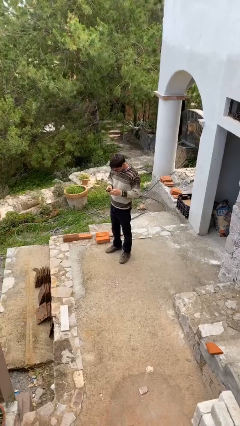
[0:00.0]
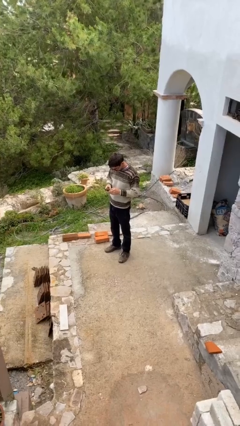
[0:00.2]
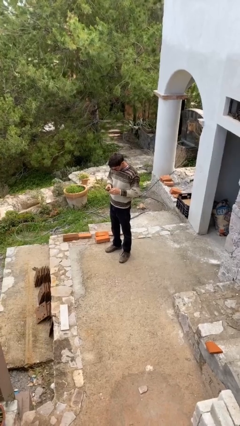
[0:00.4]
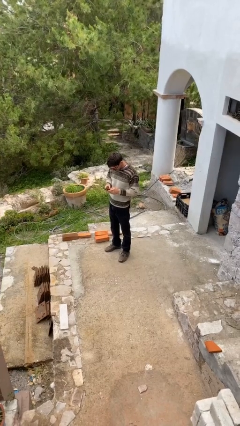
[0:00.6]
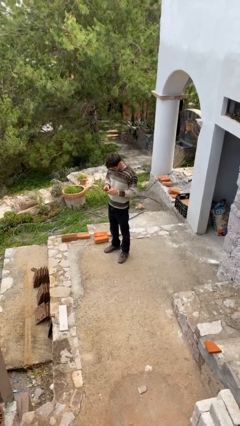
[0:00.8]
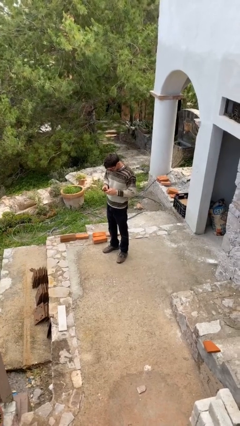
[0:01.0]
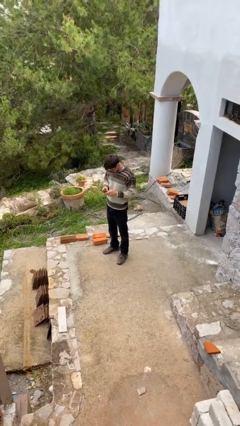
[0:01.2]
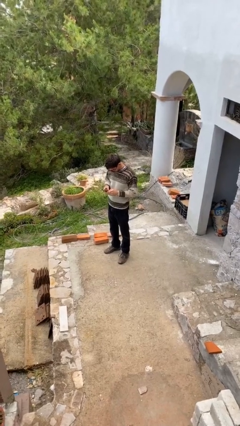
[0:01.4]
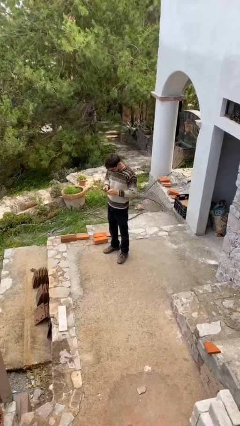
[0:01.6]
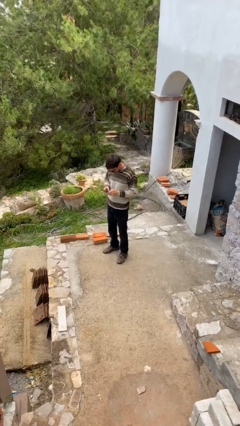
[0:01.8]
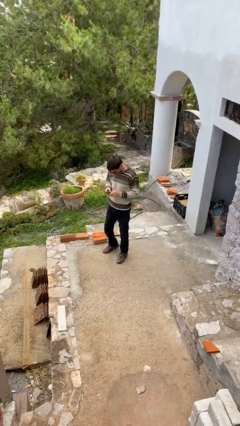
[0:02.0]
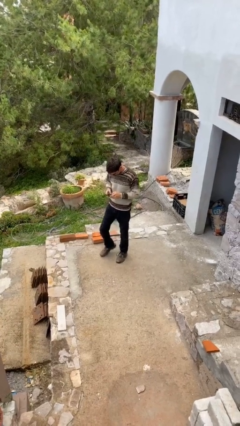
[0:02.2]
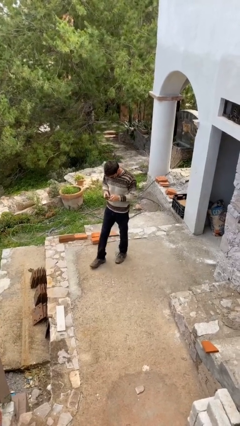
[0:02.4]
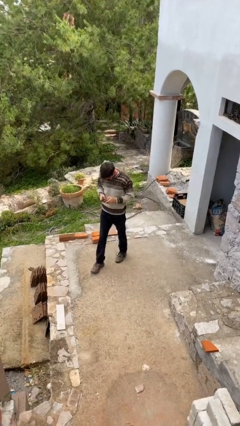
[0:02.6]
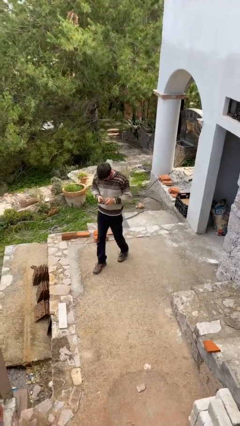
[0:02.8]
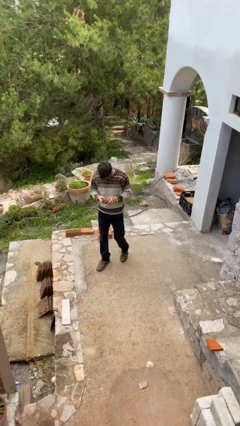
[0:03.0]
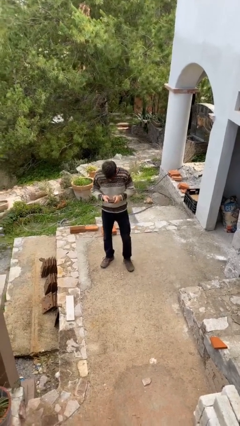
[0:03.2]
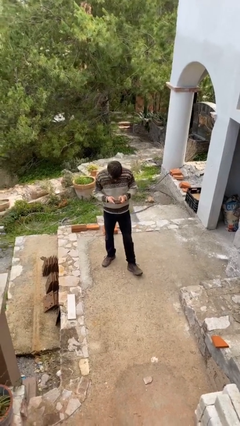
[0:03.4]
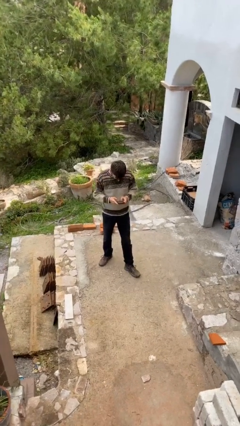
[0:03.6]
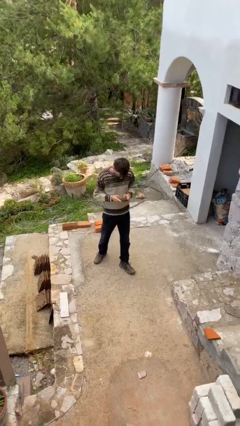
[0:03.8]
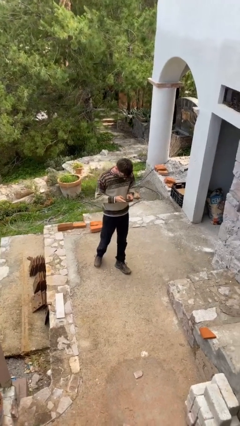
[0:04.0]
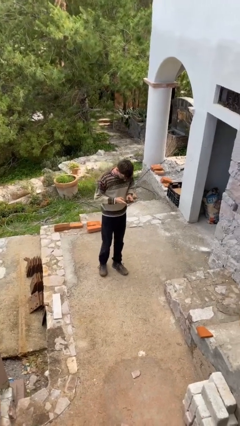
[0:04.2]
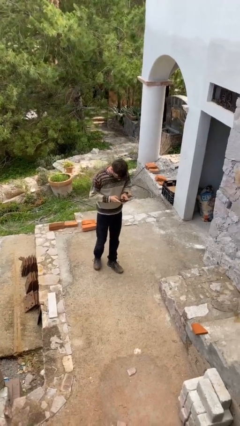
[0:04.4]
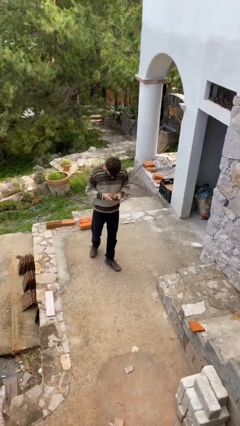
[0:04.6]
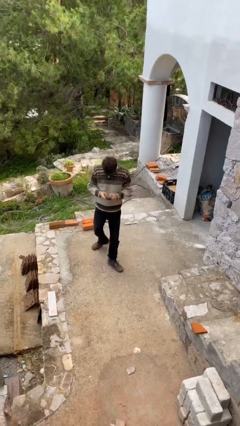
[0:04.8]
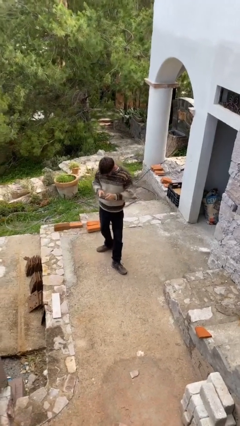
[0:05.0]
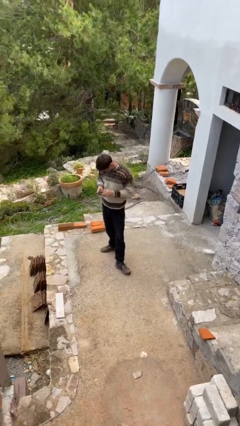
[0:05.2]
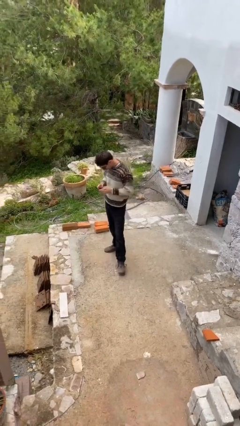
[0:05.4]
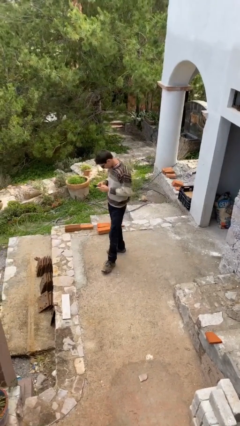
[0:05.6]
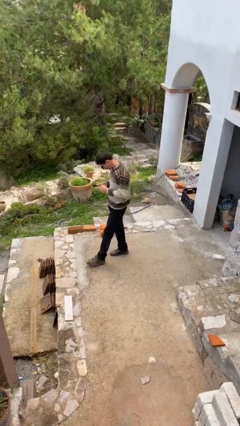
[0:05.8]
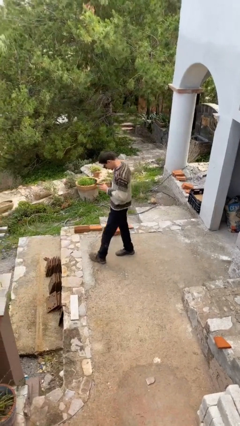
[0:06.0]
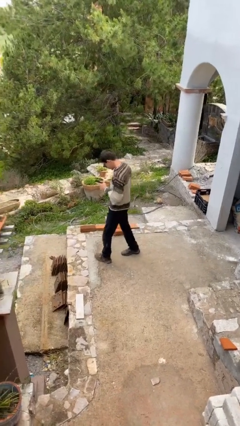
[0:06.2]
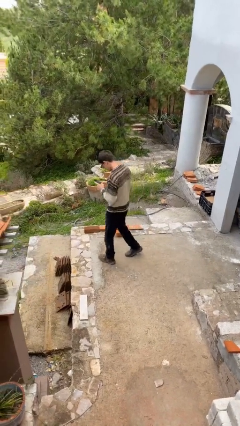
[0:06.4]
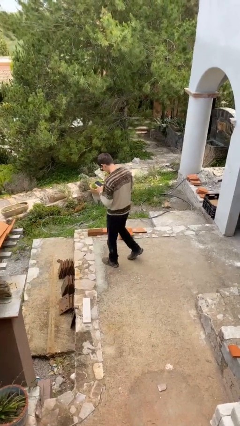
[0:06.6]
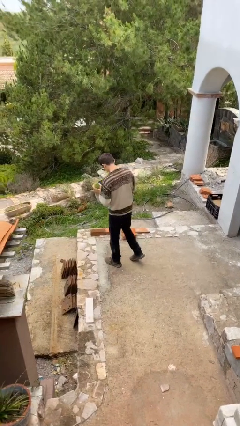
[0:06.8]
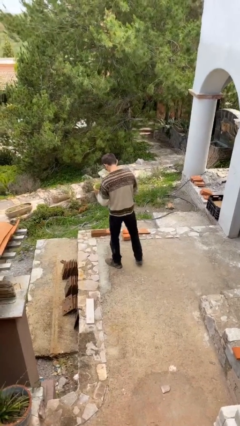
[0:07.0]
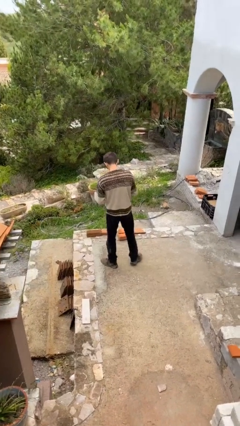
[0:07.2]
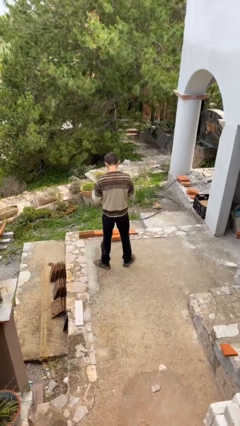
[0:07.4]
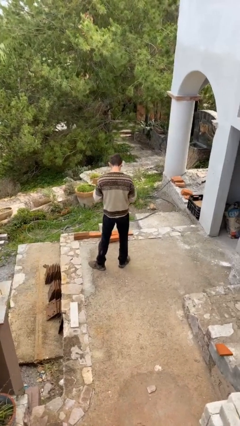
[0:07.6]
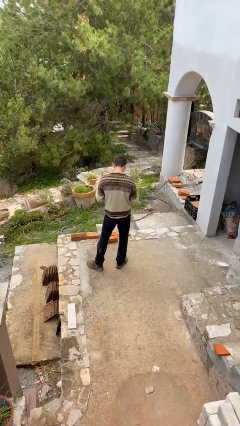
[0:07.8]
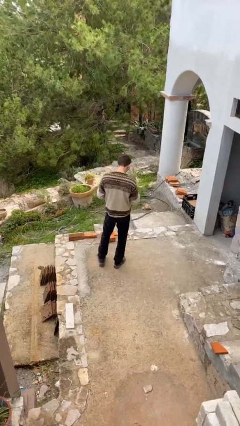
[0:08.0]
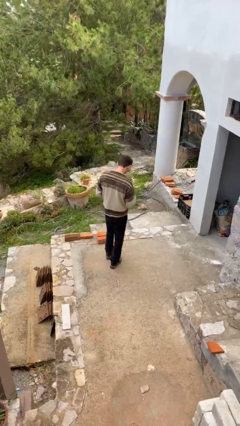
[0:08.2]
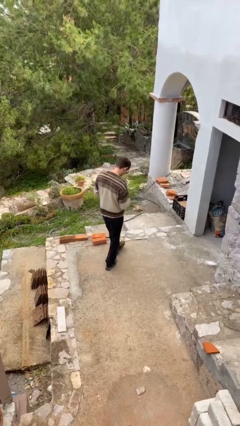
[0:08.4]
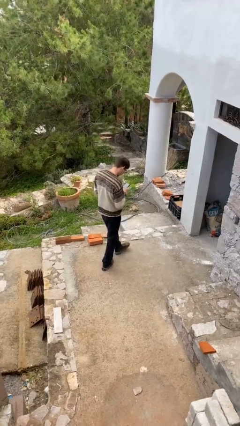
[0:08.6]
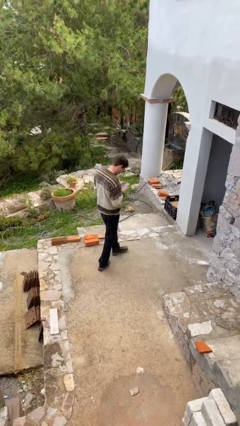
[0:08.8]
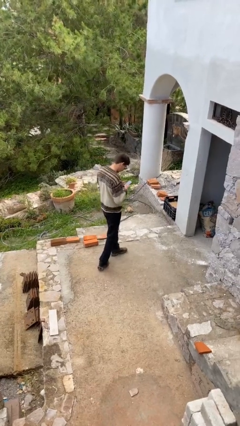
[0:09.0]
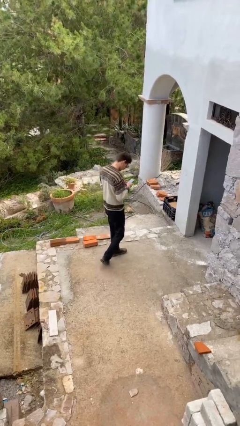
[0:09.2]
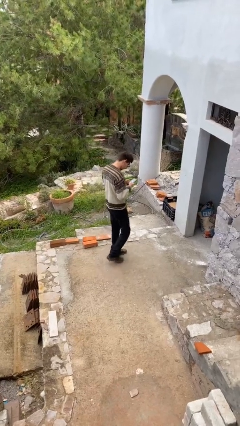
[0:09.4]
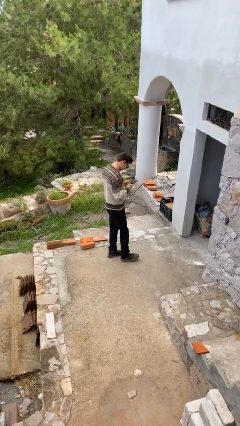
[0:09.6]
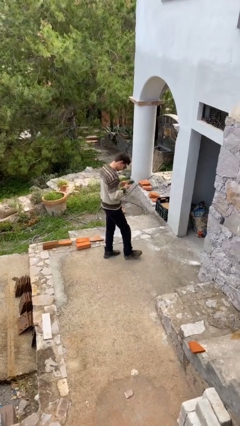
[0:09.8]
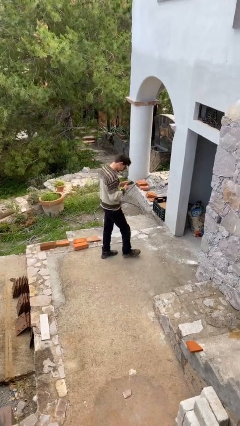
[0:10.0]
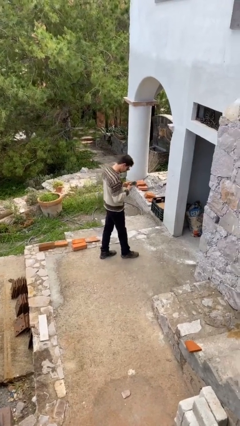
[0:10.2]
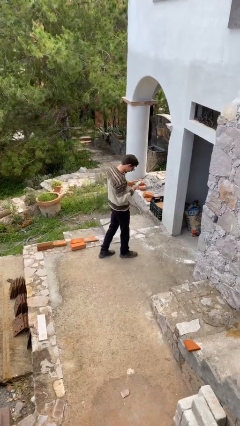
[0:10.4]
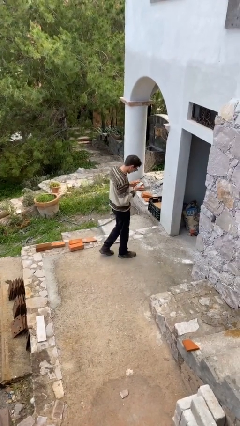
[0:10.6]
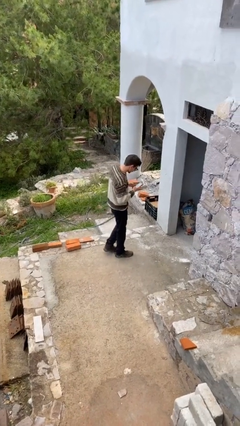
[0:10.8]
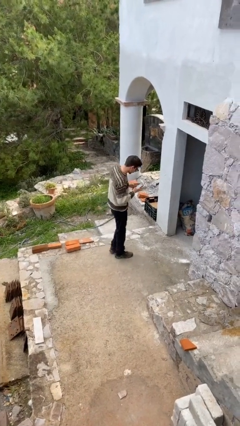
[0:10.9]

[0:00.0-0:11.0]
person texts on phone

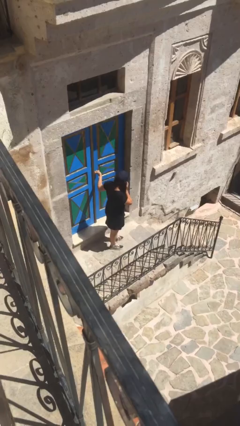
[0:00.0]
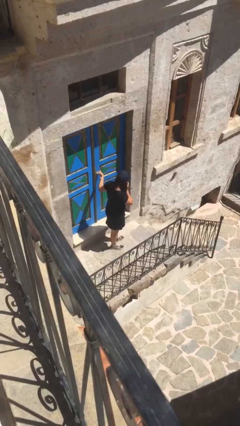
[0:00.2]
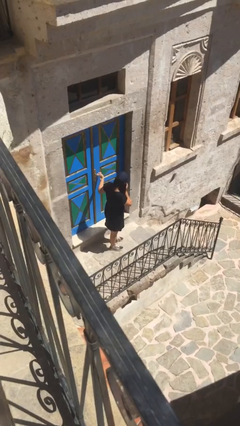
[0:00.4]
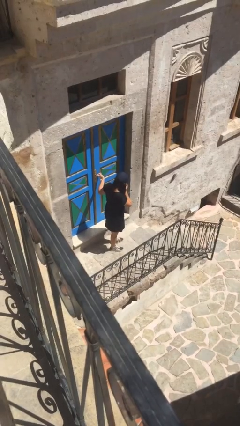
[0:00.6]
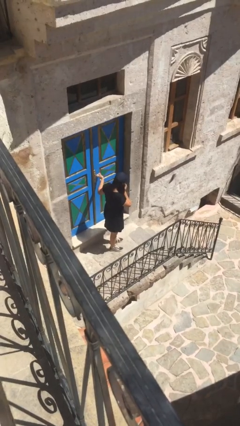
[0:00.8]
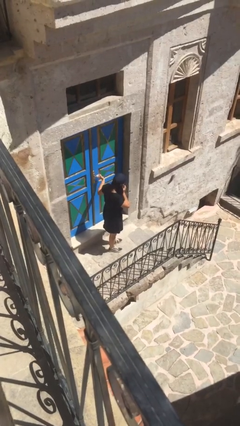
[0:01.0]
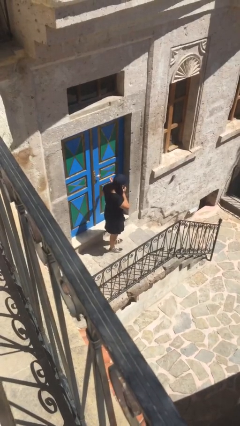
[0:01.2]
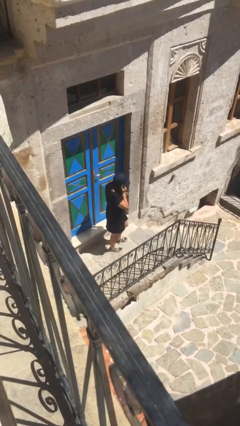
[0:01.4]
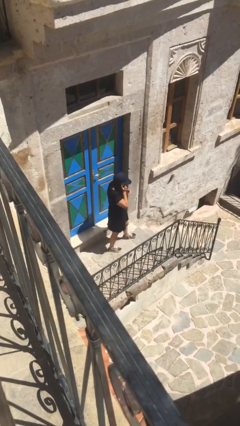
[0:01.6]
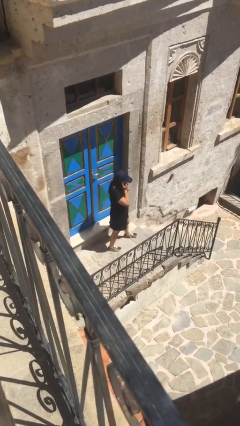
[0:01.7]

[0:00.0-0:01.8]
person closes facility door

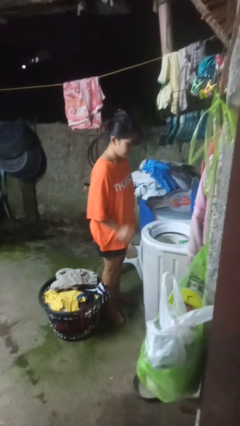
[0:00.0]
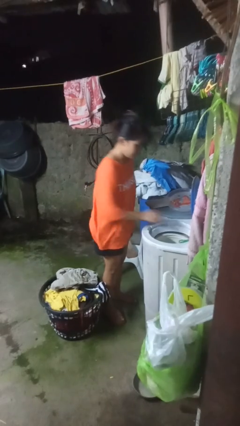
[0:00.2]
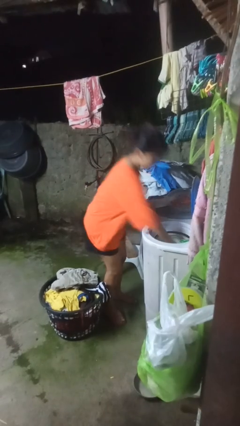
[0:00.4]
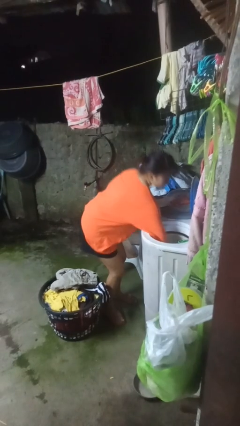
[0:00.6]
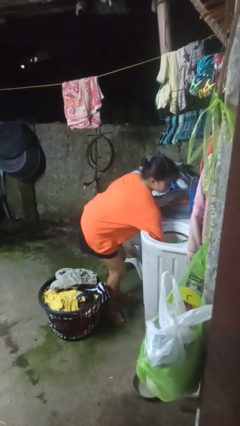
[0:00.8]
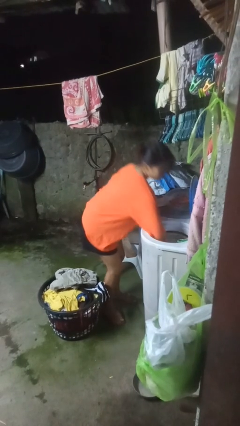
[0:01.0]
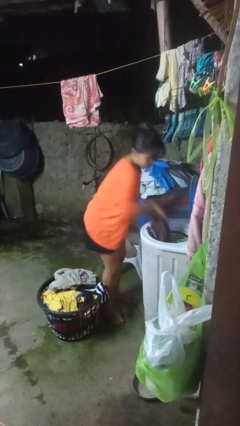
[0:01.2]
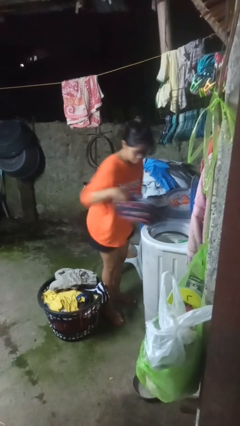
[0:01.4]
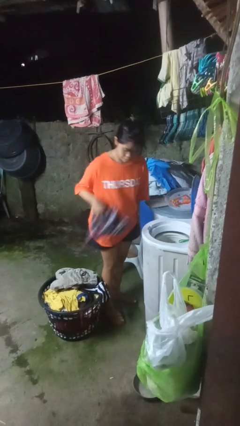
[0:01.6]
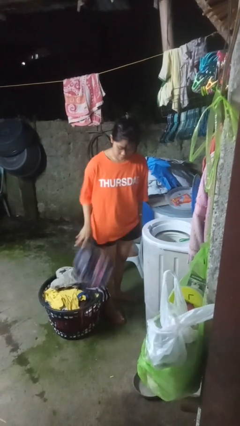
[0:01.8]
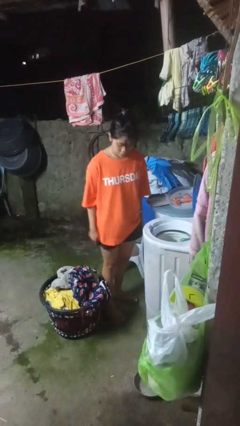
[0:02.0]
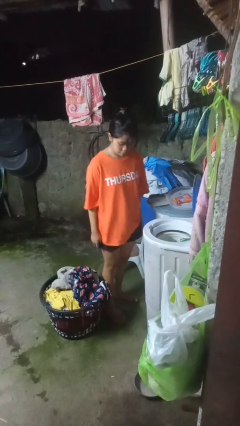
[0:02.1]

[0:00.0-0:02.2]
person unloads dryer

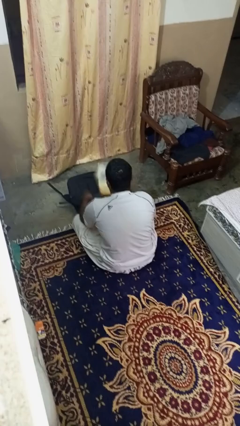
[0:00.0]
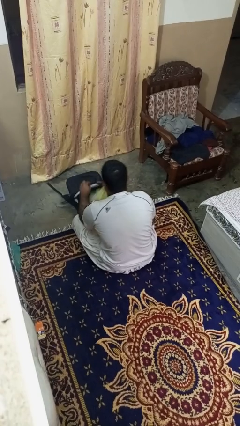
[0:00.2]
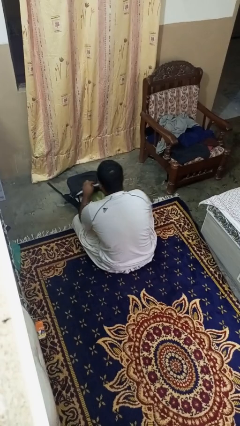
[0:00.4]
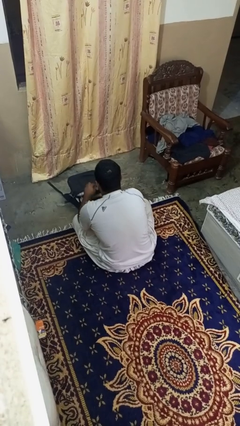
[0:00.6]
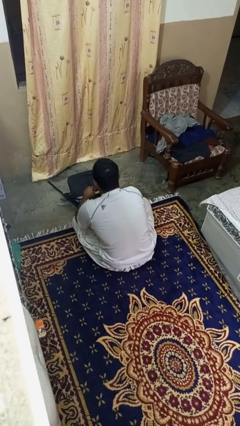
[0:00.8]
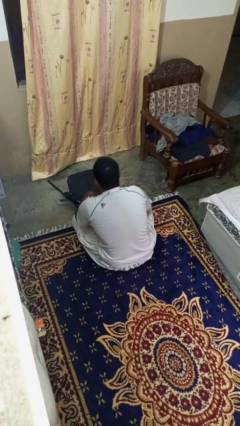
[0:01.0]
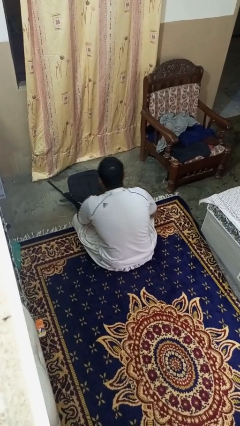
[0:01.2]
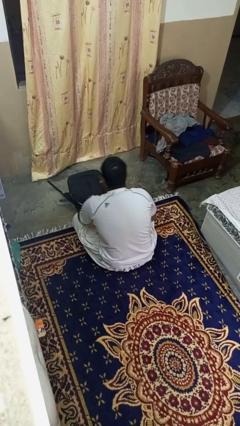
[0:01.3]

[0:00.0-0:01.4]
person puts object into bag

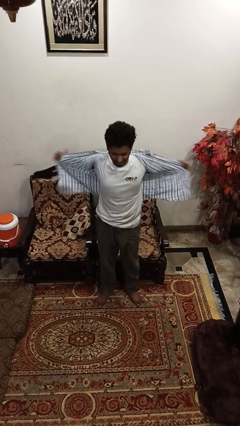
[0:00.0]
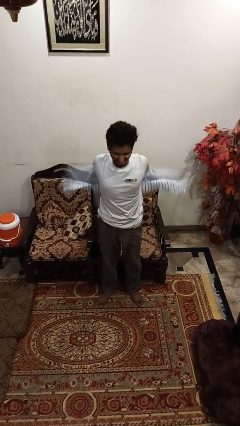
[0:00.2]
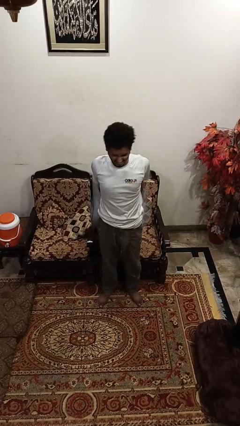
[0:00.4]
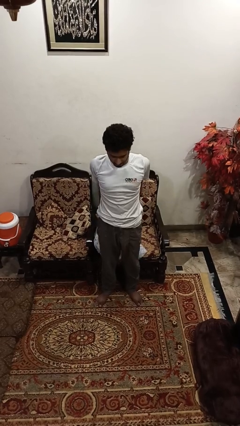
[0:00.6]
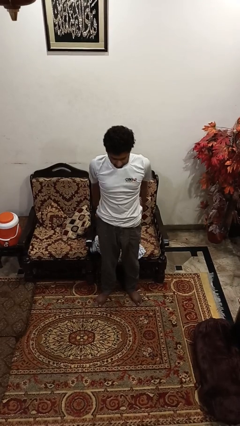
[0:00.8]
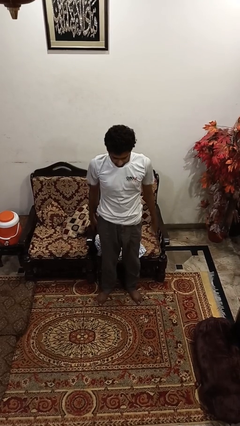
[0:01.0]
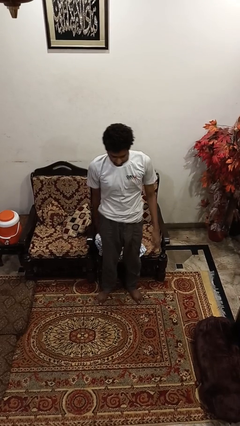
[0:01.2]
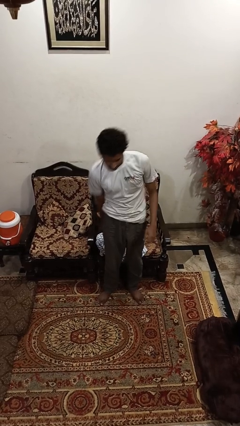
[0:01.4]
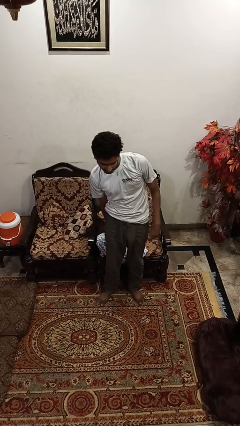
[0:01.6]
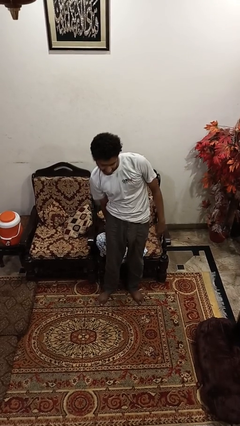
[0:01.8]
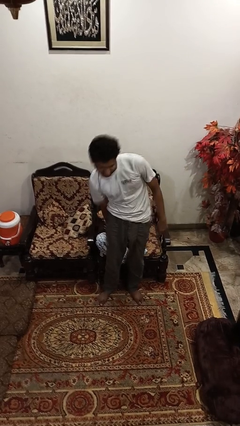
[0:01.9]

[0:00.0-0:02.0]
person takes off shirt
